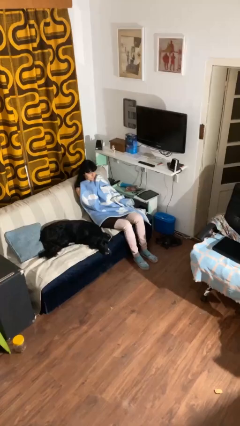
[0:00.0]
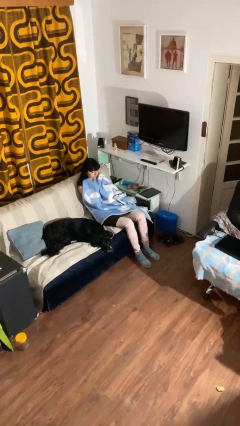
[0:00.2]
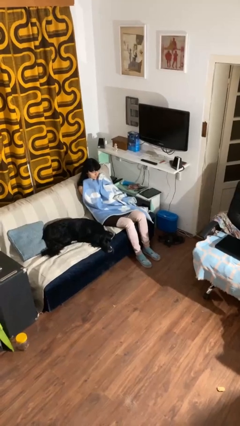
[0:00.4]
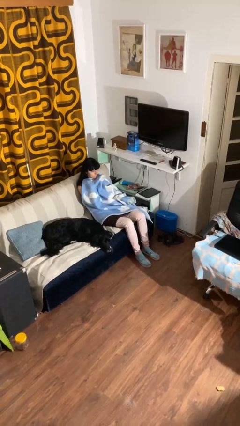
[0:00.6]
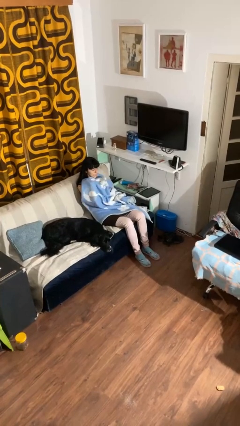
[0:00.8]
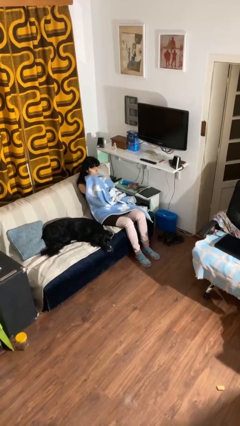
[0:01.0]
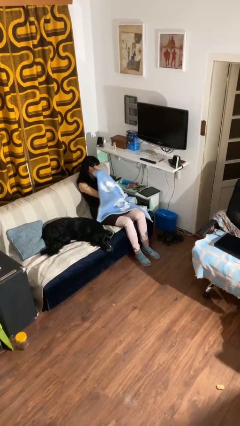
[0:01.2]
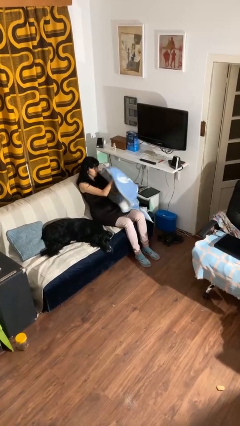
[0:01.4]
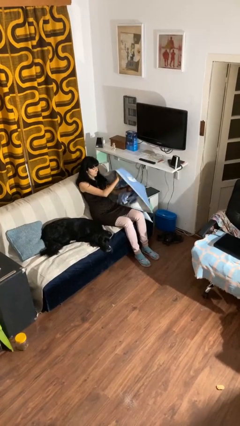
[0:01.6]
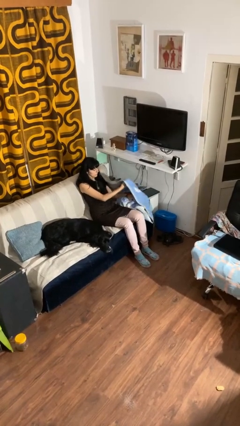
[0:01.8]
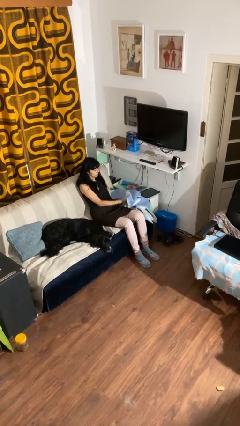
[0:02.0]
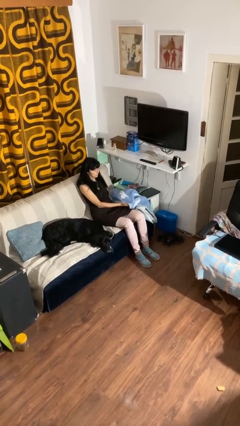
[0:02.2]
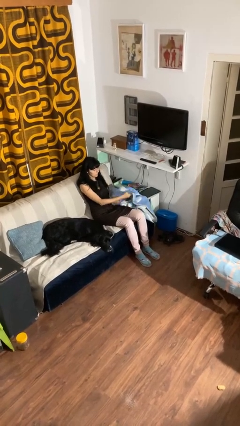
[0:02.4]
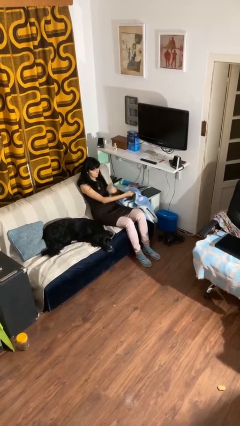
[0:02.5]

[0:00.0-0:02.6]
person uncovers with blanket

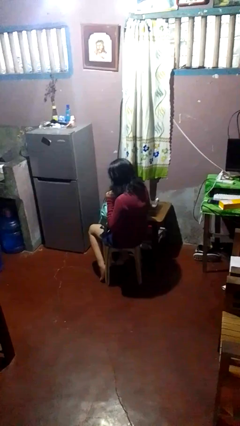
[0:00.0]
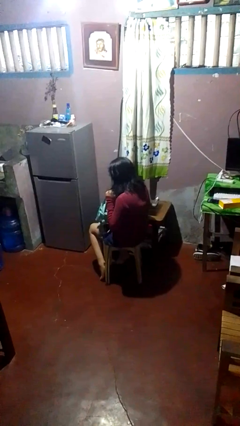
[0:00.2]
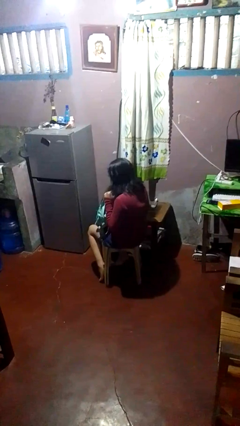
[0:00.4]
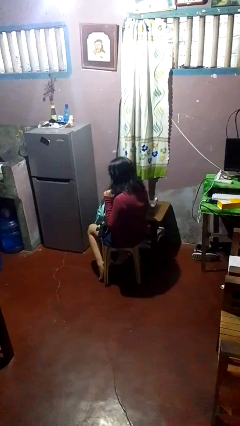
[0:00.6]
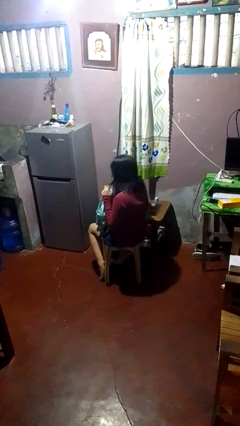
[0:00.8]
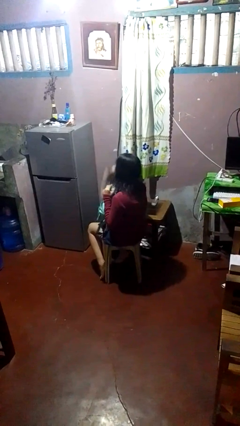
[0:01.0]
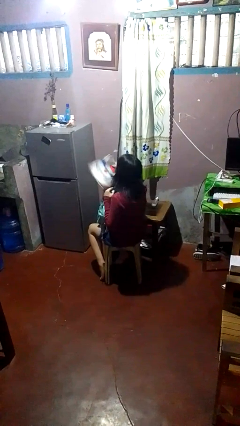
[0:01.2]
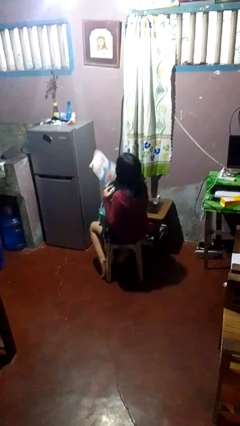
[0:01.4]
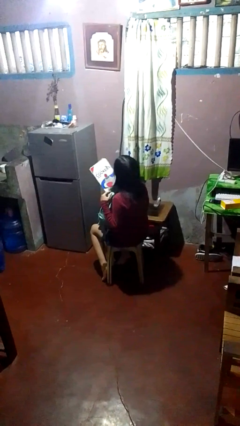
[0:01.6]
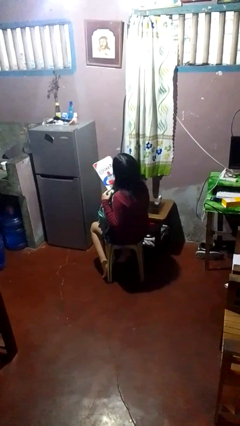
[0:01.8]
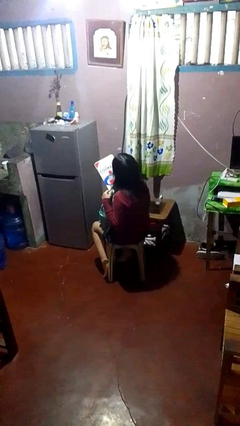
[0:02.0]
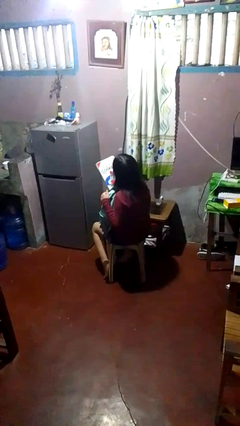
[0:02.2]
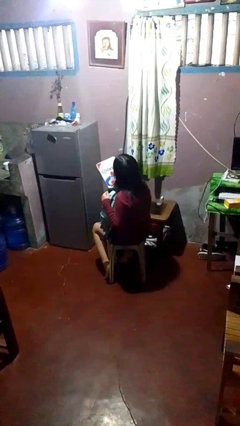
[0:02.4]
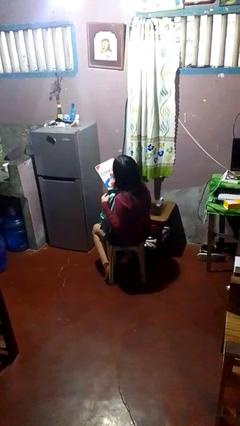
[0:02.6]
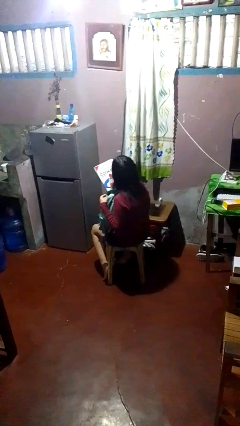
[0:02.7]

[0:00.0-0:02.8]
person takes object from backpack

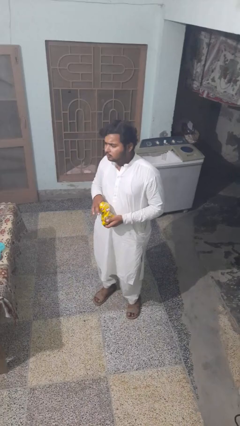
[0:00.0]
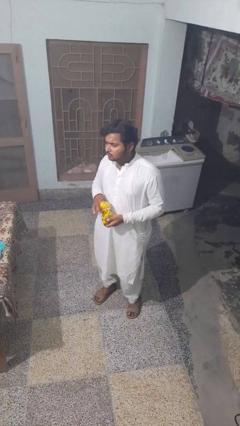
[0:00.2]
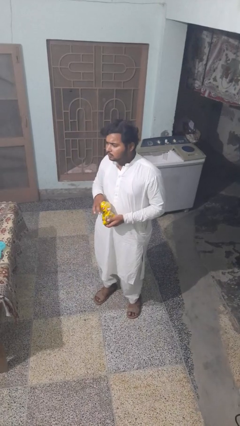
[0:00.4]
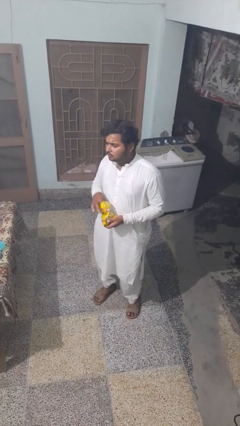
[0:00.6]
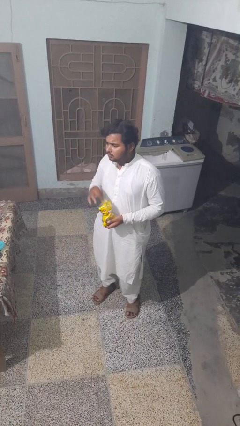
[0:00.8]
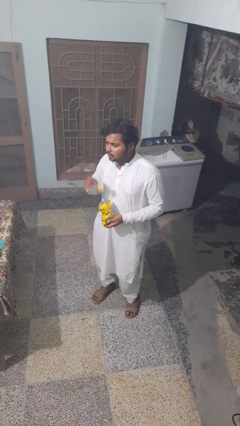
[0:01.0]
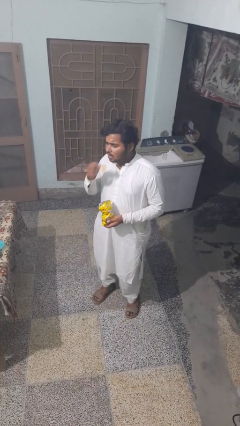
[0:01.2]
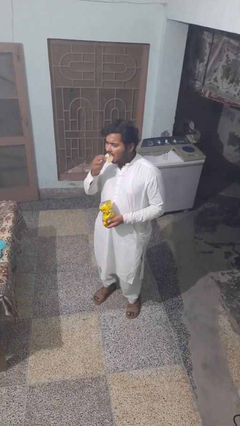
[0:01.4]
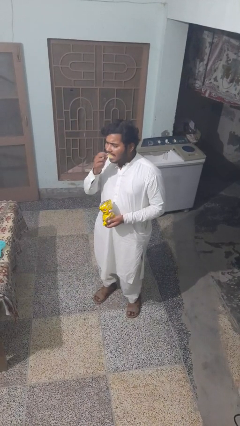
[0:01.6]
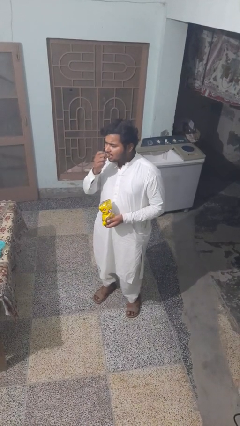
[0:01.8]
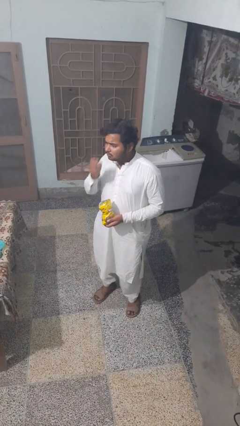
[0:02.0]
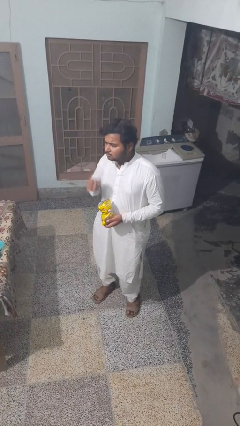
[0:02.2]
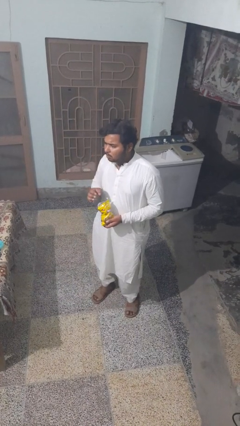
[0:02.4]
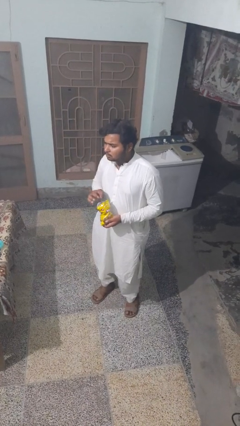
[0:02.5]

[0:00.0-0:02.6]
person eats snack from bag

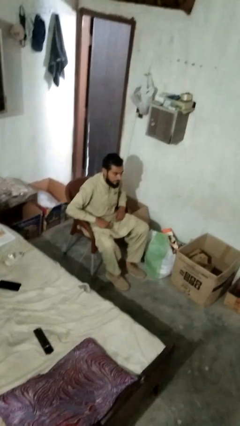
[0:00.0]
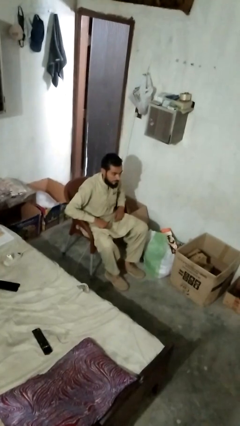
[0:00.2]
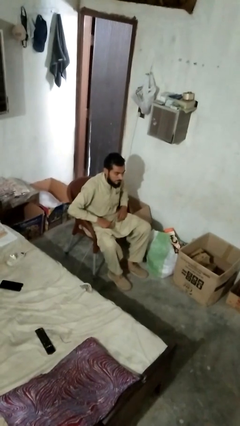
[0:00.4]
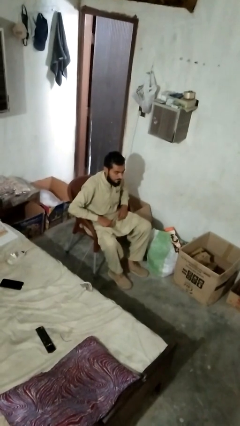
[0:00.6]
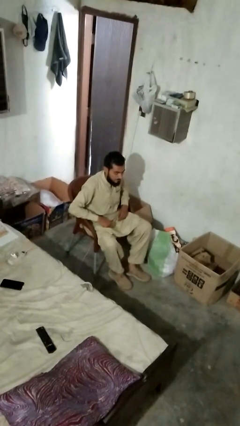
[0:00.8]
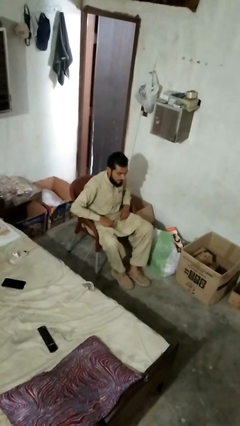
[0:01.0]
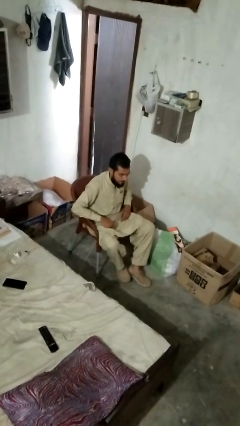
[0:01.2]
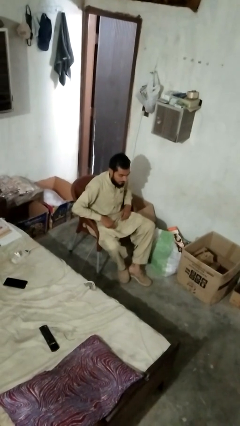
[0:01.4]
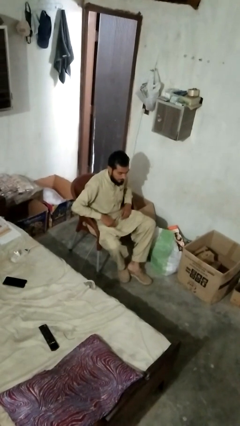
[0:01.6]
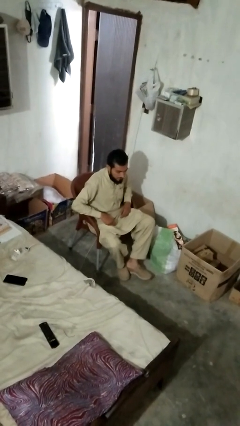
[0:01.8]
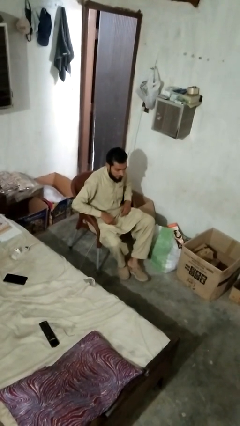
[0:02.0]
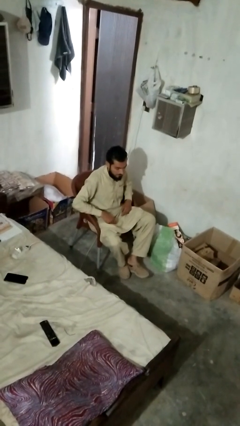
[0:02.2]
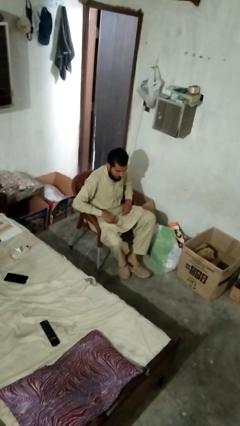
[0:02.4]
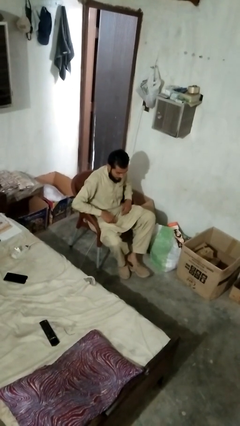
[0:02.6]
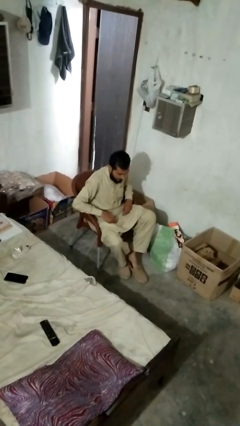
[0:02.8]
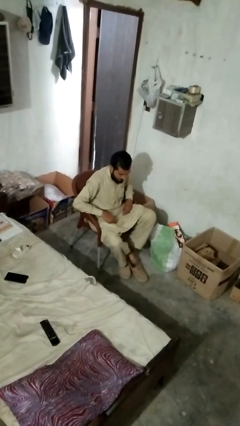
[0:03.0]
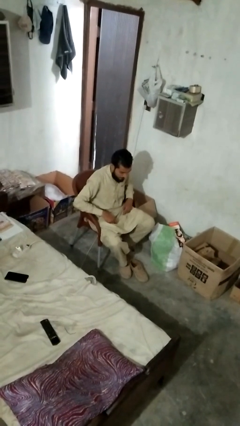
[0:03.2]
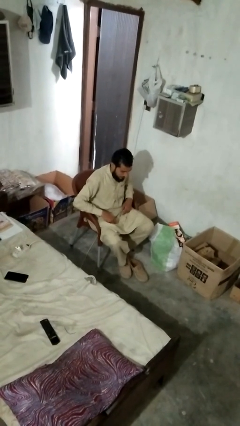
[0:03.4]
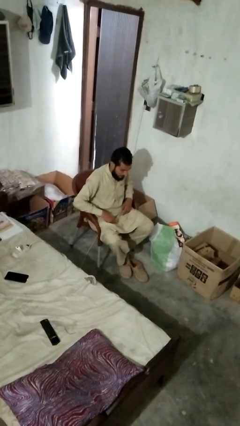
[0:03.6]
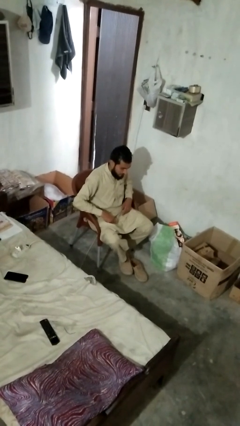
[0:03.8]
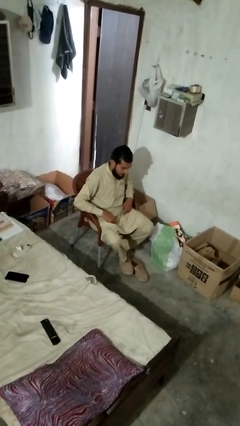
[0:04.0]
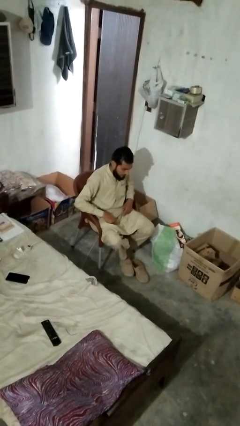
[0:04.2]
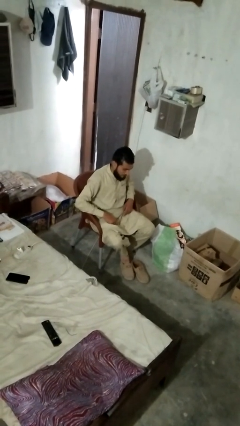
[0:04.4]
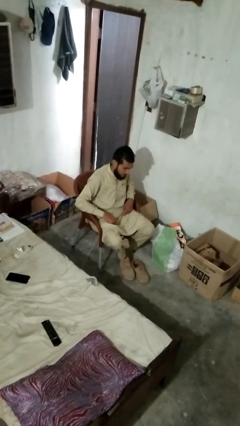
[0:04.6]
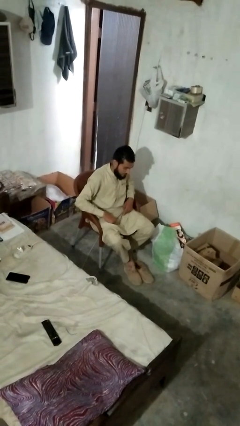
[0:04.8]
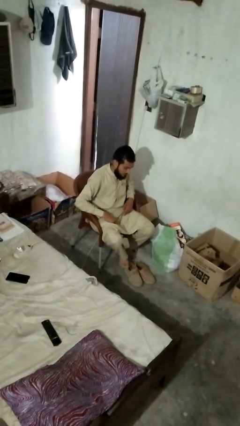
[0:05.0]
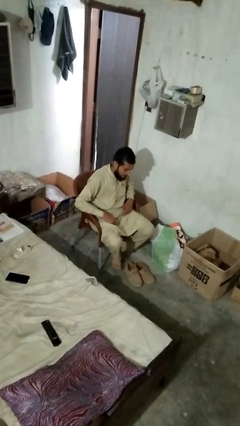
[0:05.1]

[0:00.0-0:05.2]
person takes off boots

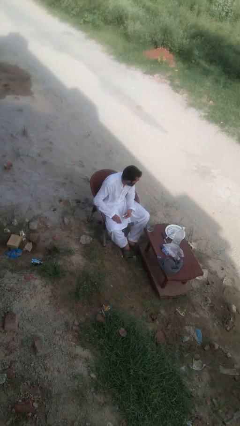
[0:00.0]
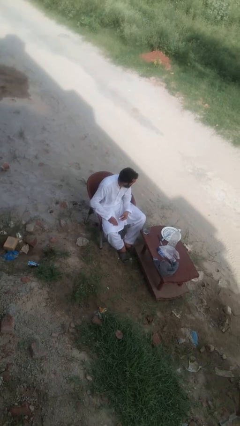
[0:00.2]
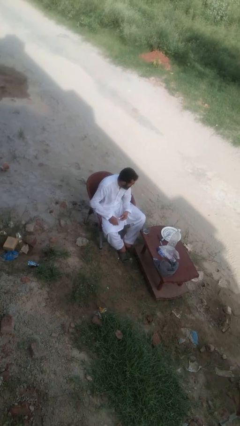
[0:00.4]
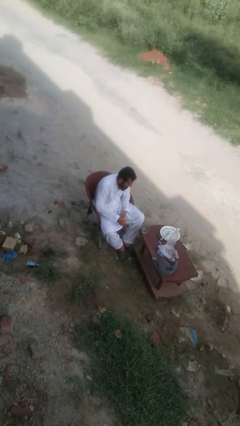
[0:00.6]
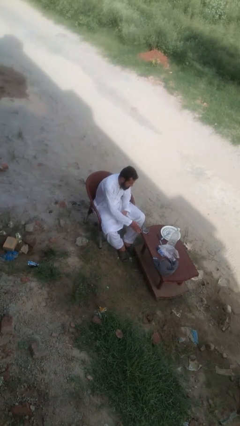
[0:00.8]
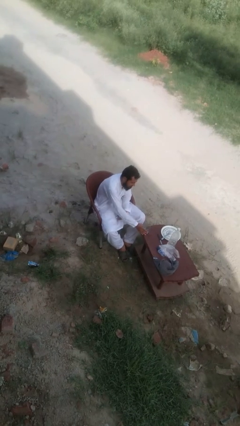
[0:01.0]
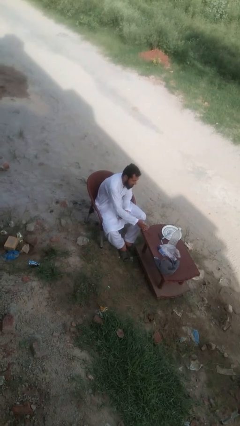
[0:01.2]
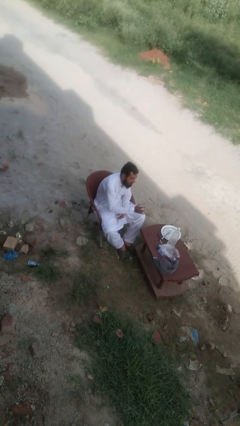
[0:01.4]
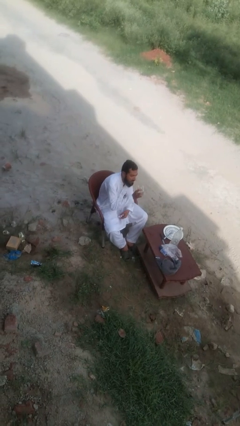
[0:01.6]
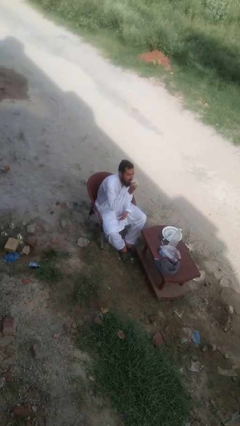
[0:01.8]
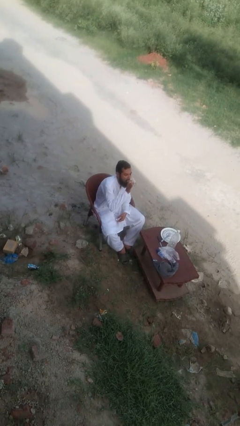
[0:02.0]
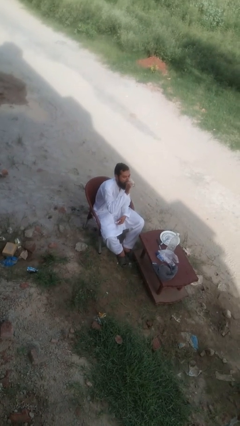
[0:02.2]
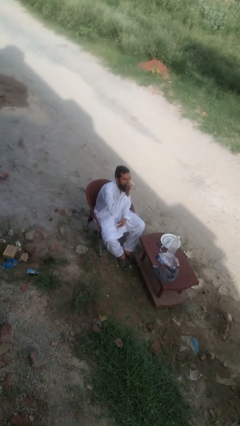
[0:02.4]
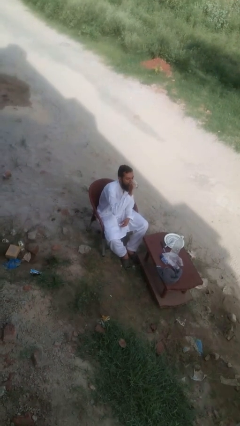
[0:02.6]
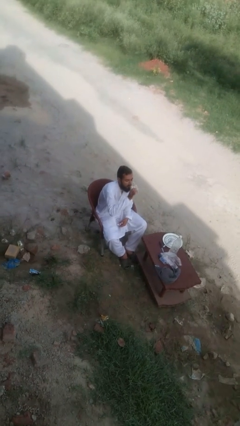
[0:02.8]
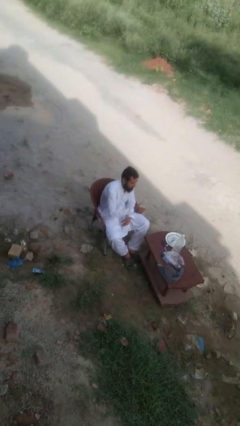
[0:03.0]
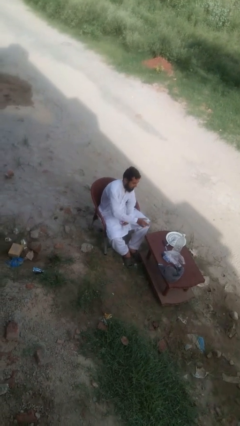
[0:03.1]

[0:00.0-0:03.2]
person drinks from cup

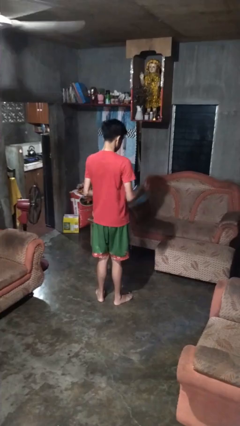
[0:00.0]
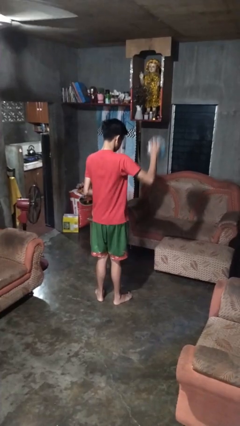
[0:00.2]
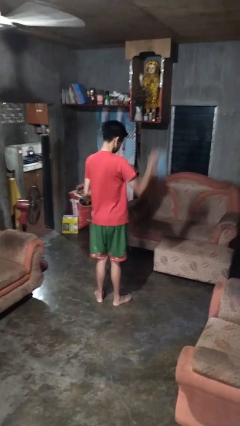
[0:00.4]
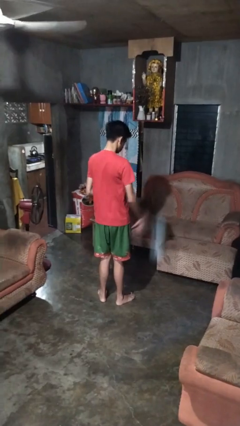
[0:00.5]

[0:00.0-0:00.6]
person bounces ball on floor

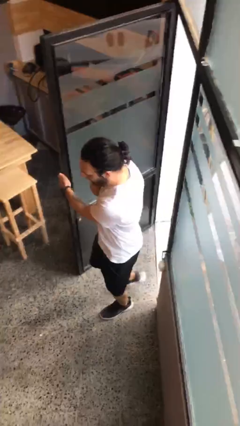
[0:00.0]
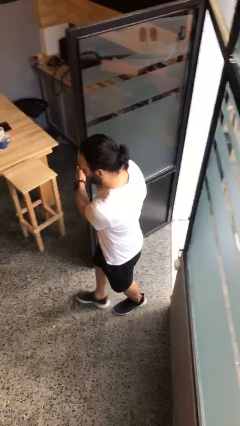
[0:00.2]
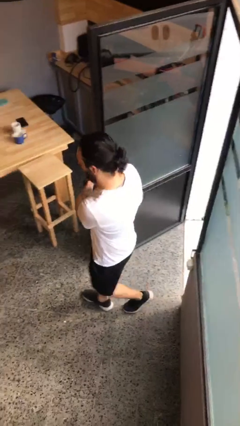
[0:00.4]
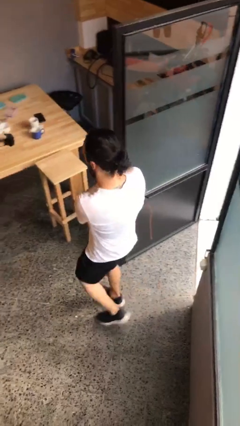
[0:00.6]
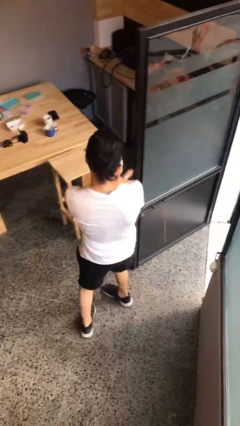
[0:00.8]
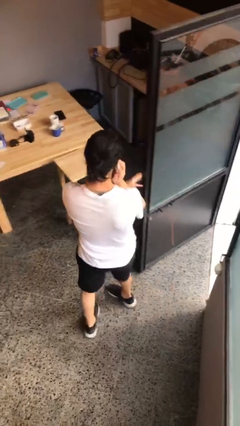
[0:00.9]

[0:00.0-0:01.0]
person enters scene through structure
